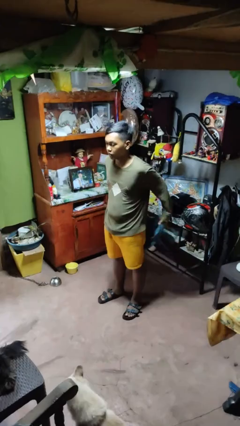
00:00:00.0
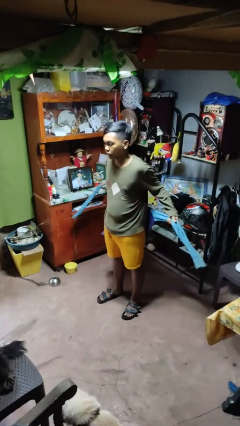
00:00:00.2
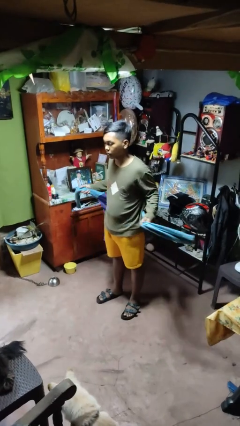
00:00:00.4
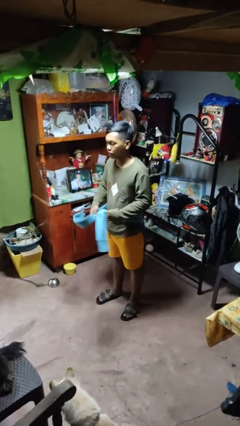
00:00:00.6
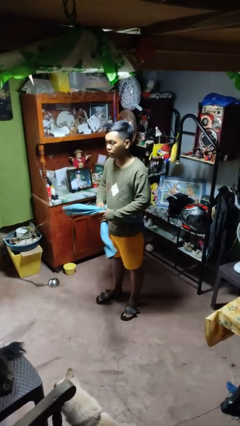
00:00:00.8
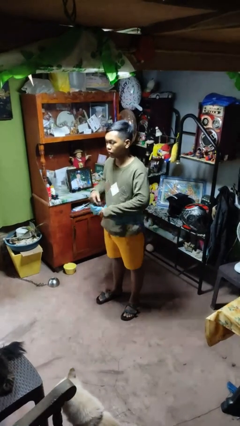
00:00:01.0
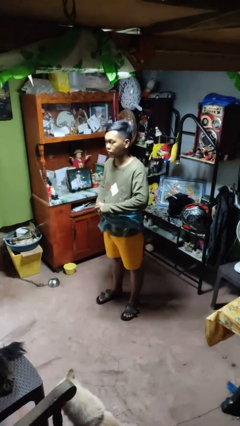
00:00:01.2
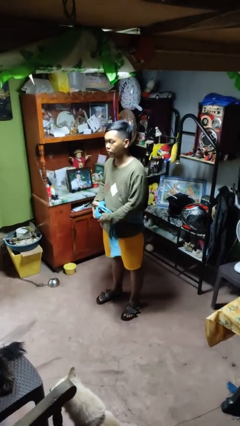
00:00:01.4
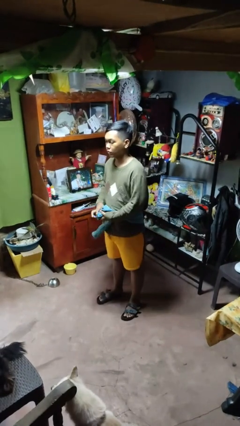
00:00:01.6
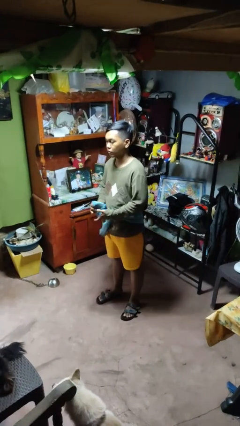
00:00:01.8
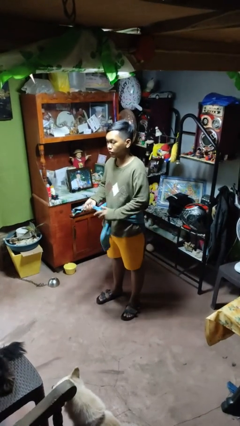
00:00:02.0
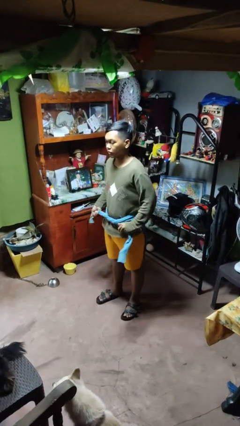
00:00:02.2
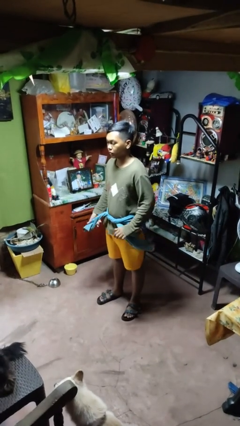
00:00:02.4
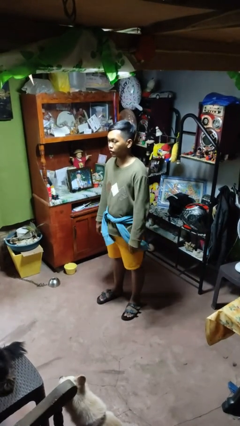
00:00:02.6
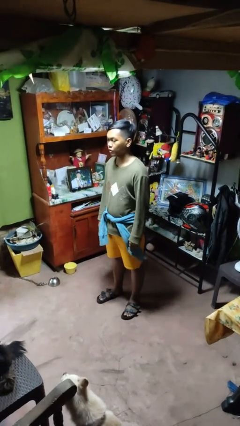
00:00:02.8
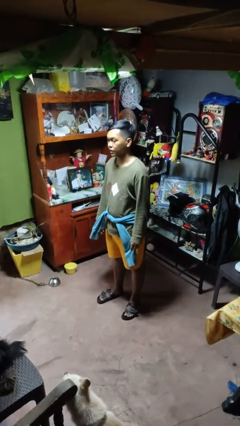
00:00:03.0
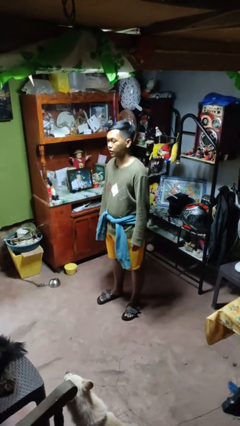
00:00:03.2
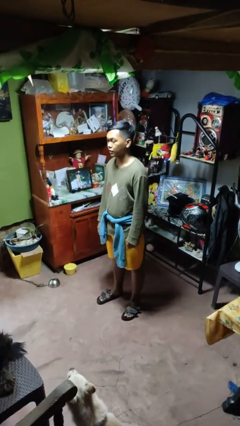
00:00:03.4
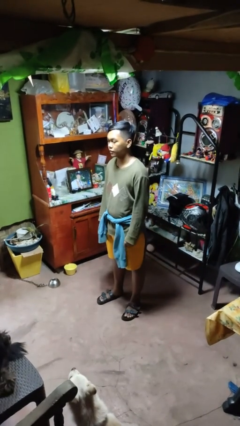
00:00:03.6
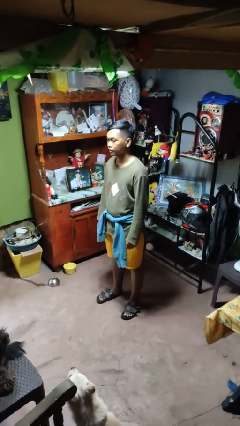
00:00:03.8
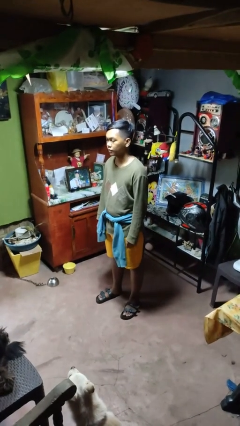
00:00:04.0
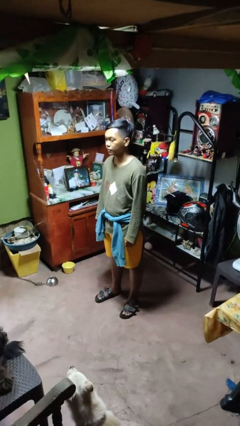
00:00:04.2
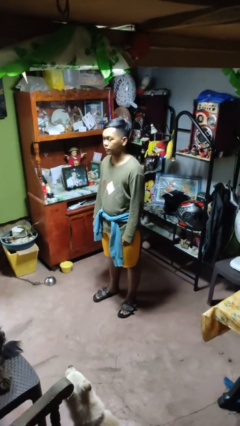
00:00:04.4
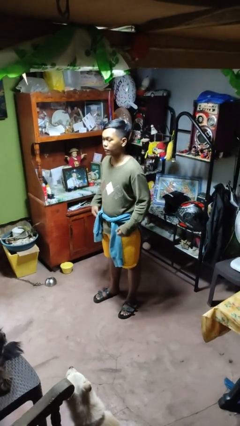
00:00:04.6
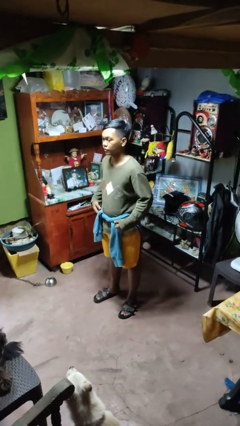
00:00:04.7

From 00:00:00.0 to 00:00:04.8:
person ties jacket around waist

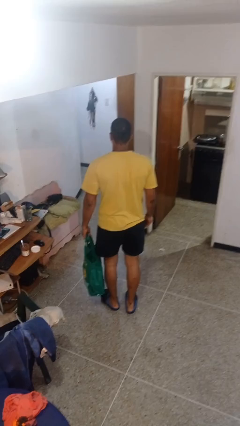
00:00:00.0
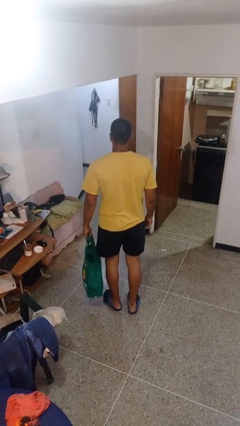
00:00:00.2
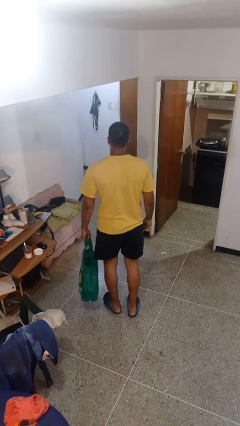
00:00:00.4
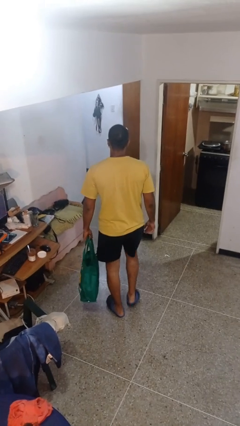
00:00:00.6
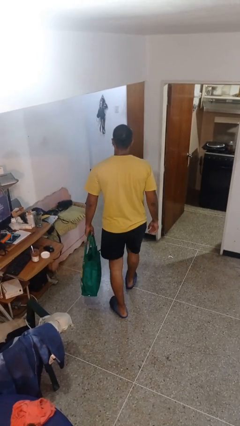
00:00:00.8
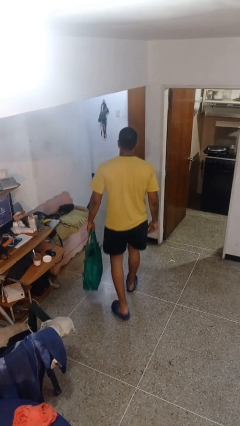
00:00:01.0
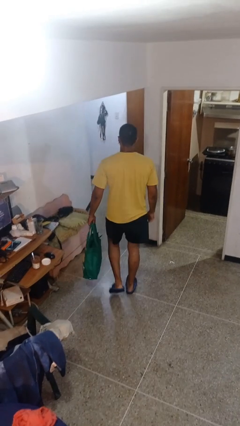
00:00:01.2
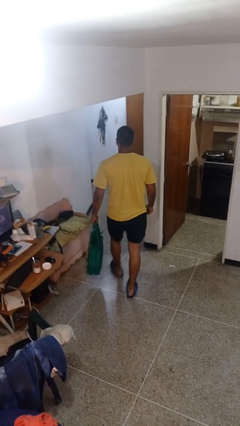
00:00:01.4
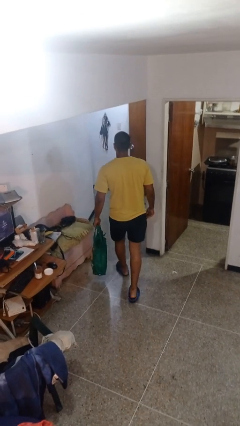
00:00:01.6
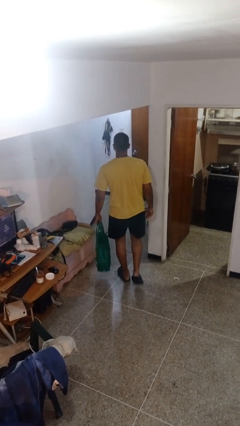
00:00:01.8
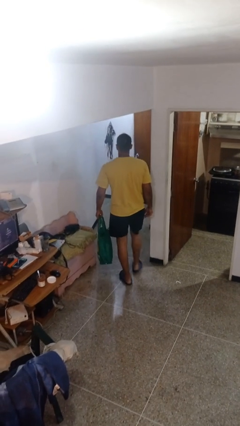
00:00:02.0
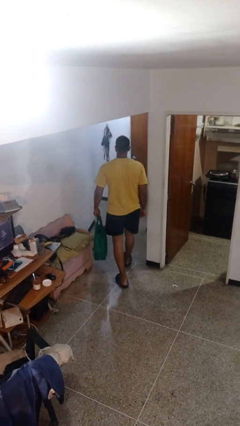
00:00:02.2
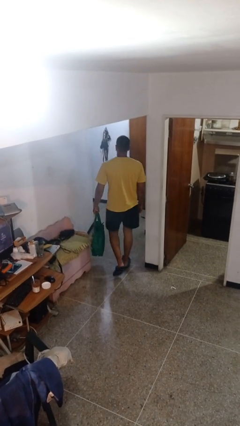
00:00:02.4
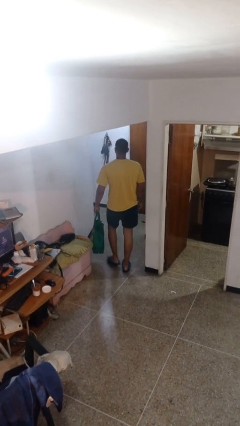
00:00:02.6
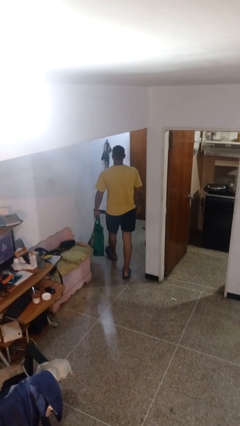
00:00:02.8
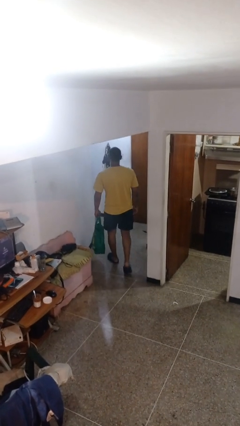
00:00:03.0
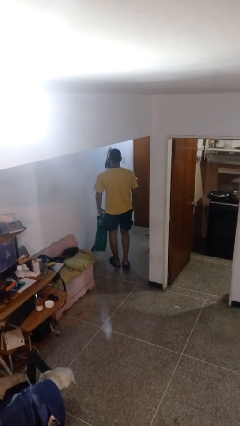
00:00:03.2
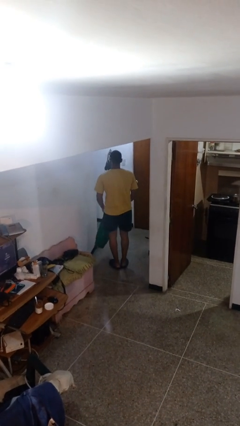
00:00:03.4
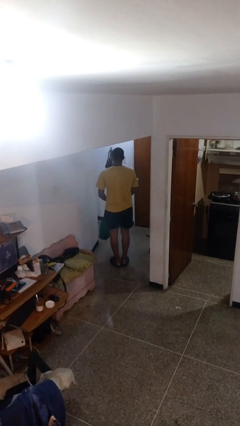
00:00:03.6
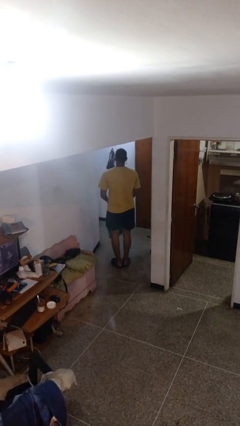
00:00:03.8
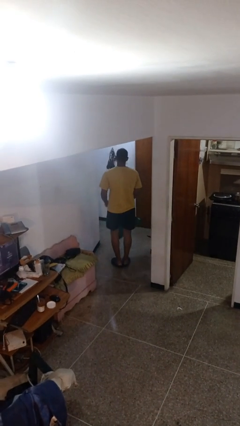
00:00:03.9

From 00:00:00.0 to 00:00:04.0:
person carries groceries

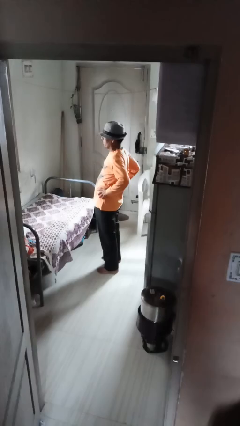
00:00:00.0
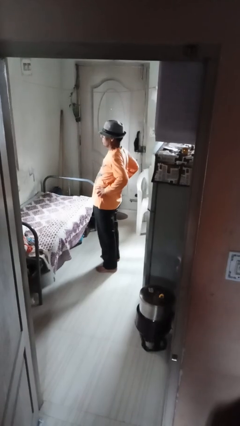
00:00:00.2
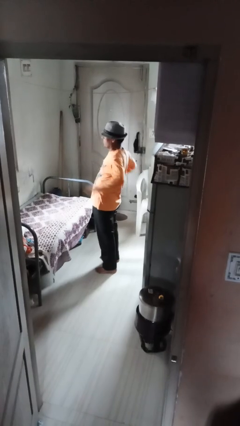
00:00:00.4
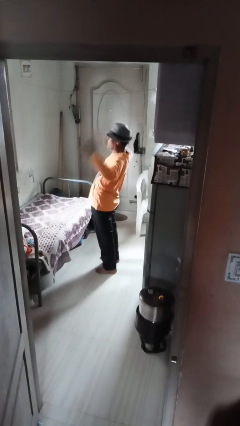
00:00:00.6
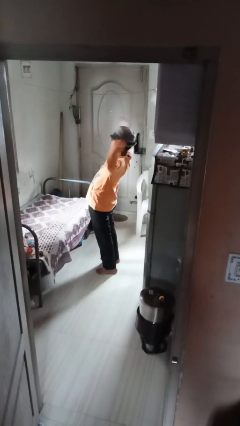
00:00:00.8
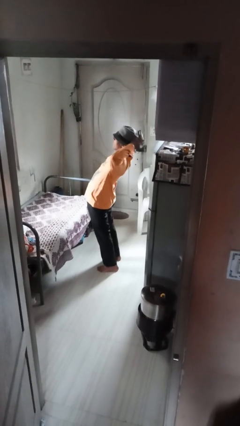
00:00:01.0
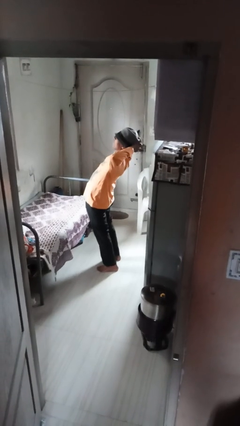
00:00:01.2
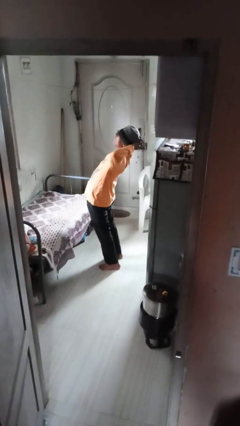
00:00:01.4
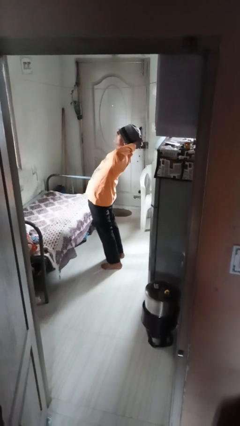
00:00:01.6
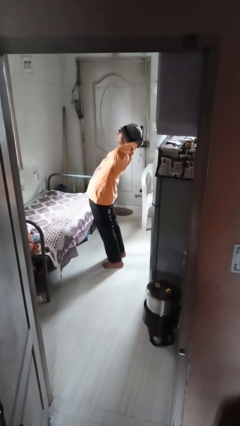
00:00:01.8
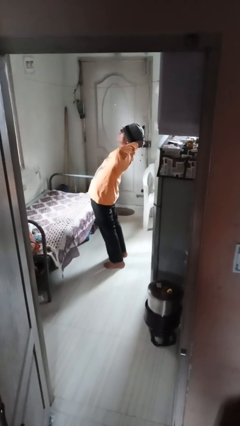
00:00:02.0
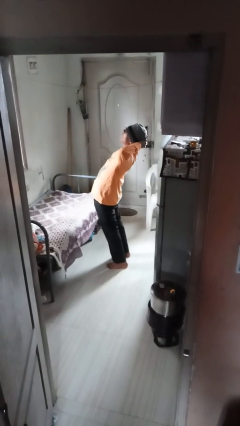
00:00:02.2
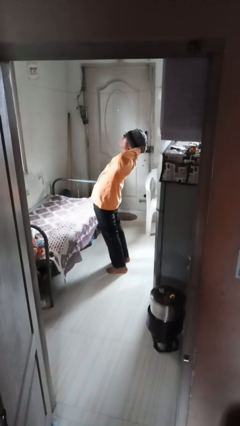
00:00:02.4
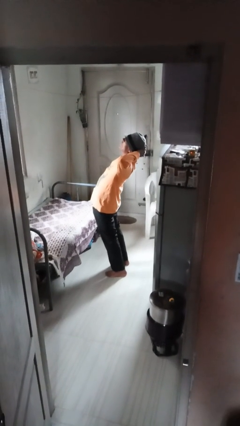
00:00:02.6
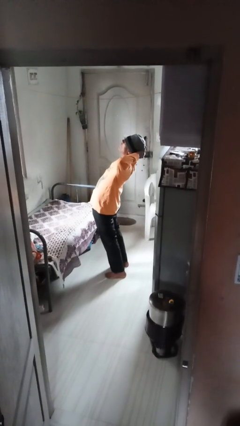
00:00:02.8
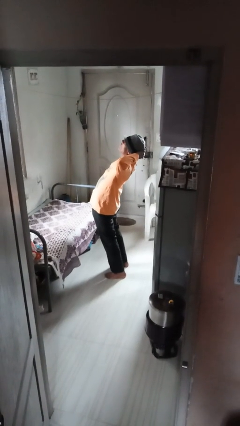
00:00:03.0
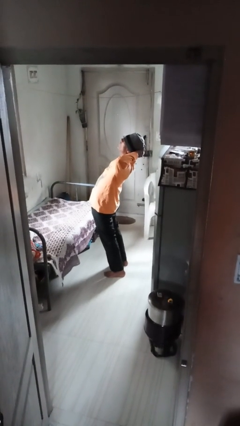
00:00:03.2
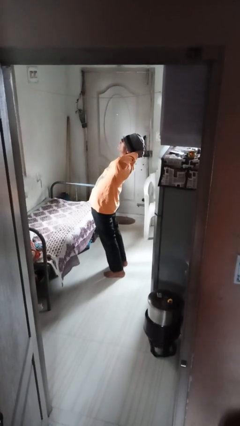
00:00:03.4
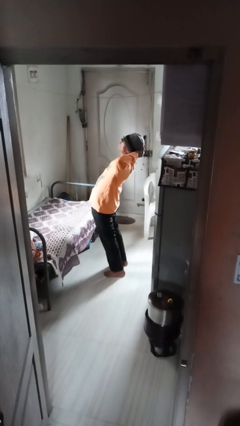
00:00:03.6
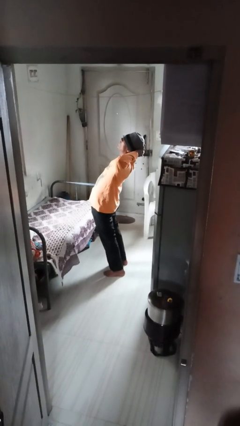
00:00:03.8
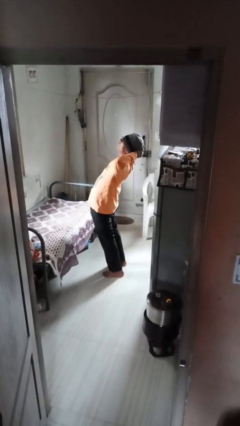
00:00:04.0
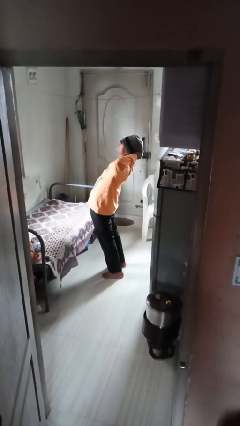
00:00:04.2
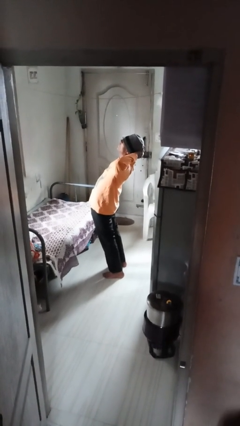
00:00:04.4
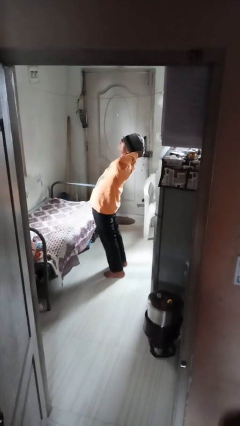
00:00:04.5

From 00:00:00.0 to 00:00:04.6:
person stretches arms over head

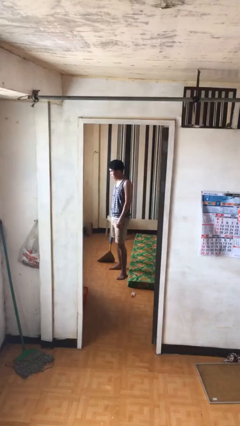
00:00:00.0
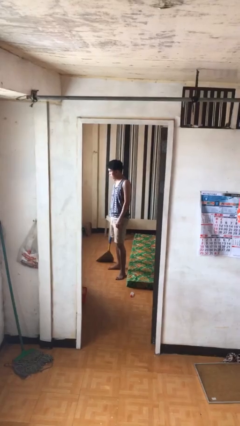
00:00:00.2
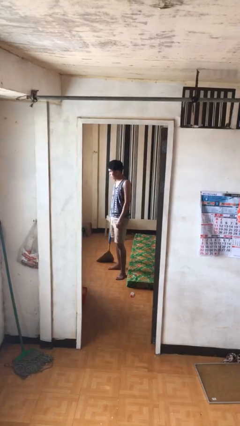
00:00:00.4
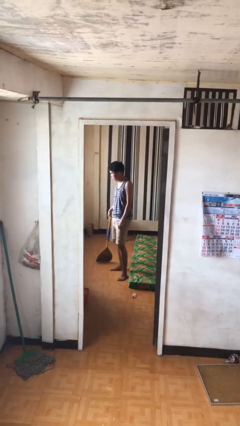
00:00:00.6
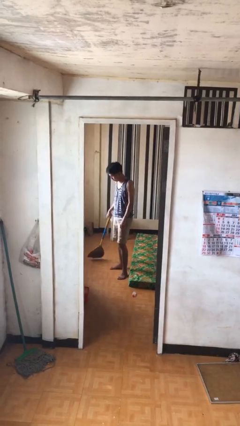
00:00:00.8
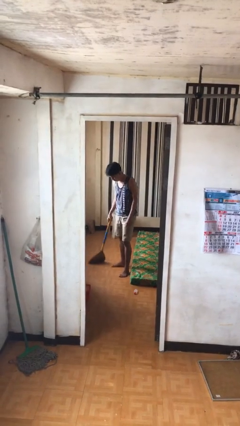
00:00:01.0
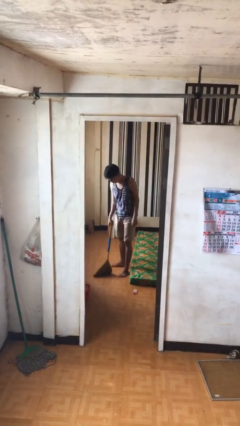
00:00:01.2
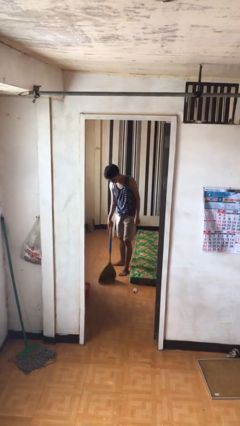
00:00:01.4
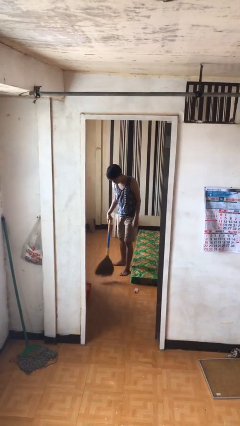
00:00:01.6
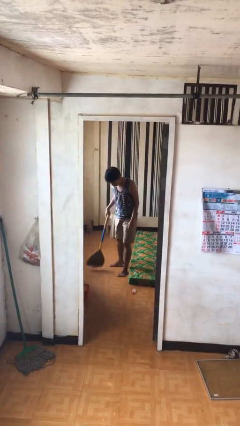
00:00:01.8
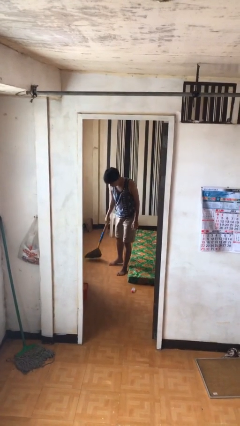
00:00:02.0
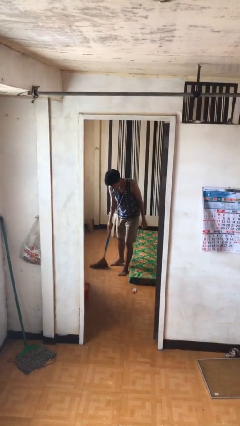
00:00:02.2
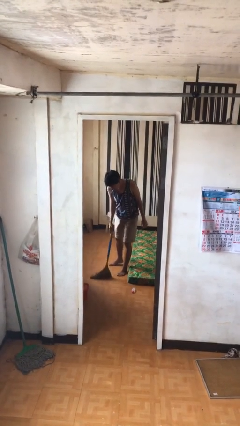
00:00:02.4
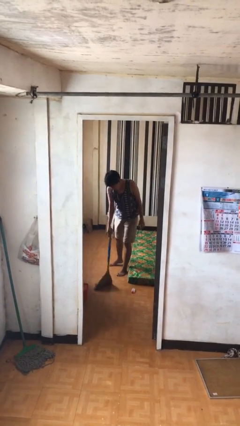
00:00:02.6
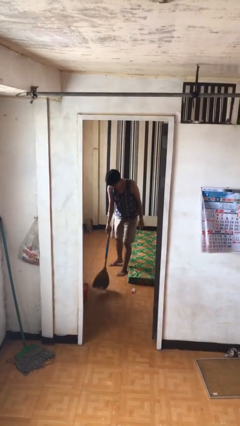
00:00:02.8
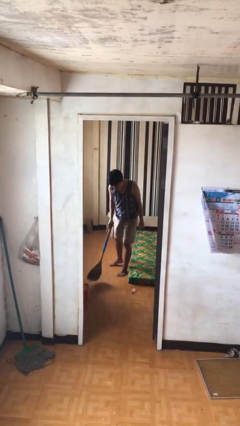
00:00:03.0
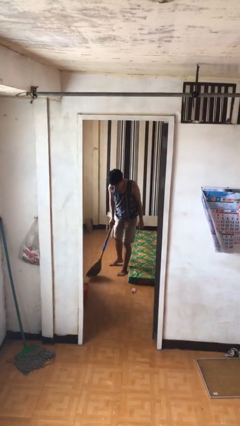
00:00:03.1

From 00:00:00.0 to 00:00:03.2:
person sweeps floor

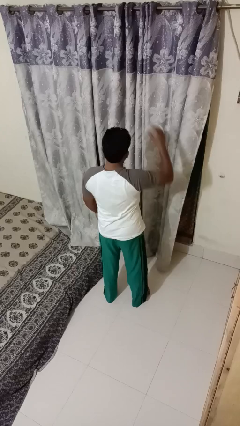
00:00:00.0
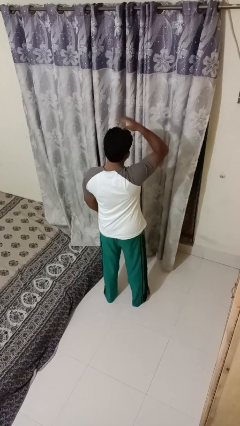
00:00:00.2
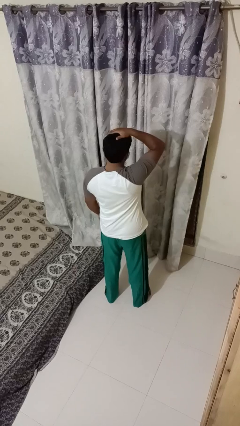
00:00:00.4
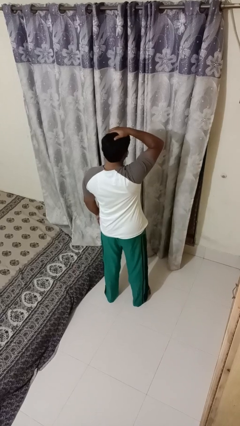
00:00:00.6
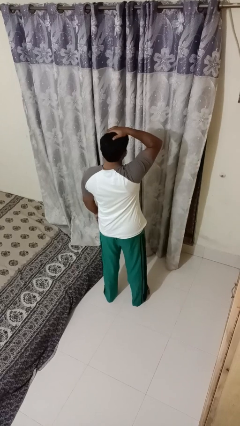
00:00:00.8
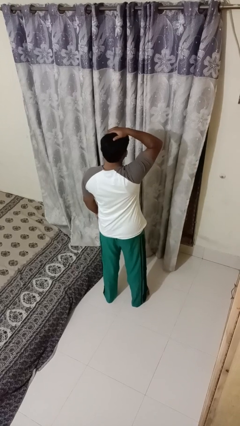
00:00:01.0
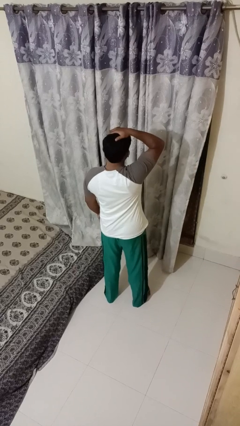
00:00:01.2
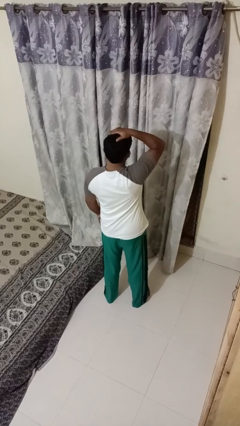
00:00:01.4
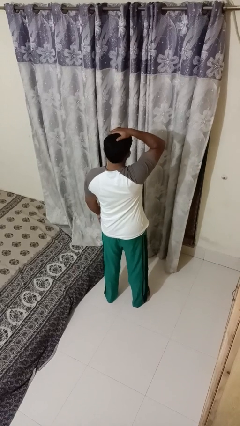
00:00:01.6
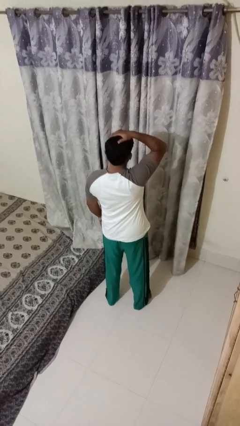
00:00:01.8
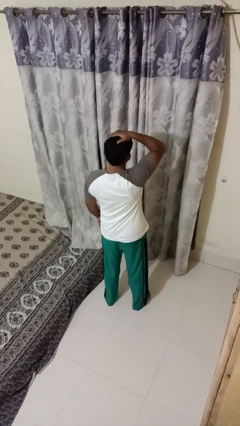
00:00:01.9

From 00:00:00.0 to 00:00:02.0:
person pats head
